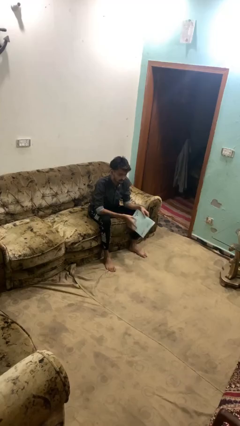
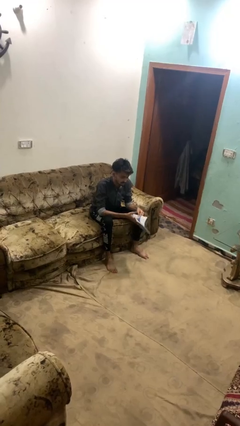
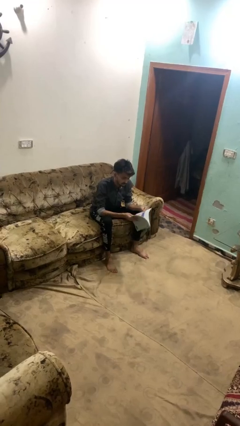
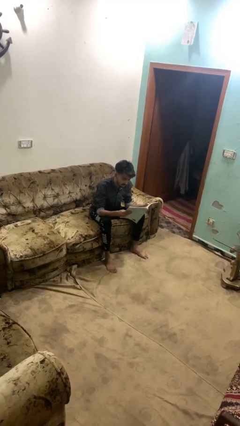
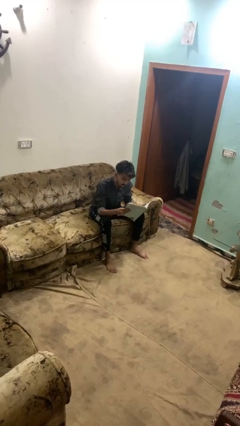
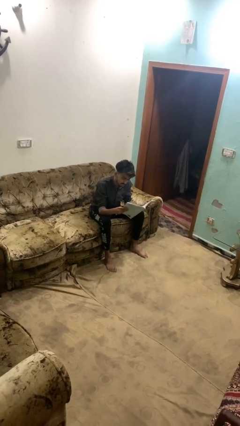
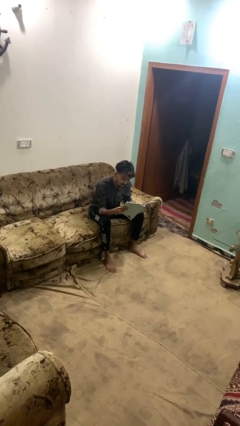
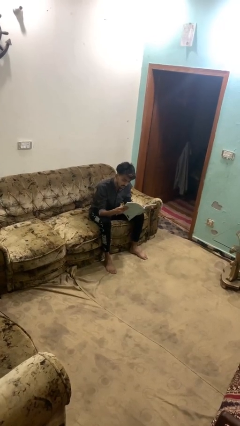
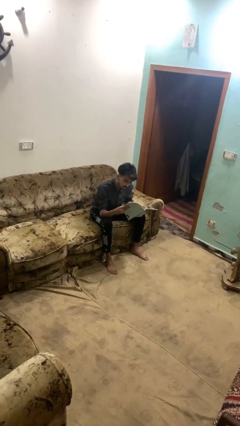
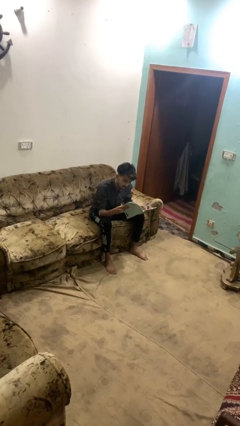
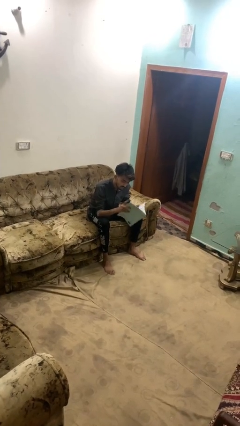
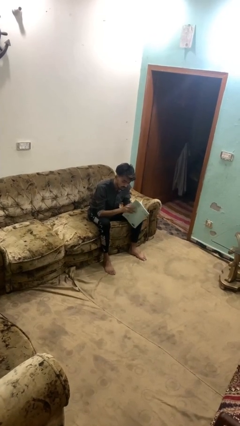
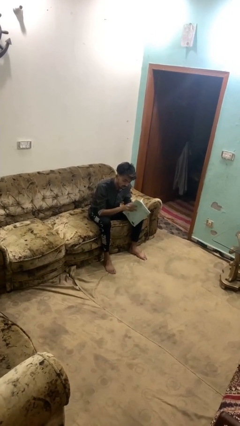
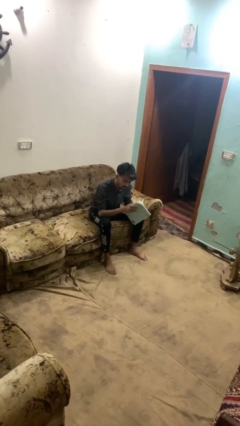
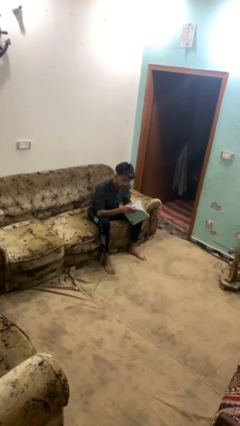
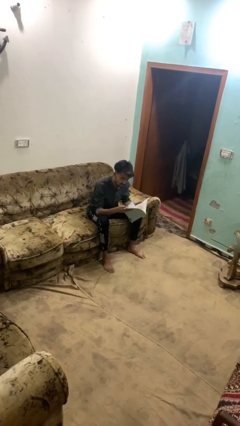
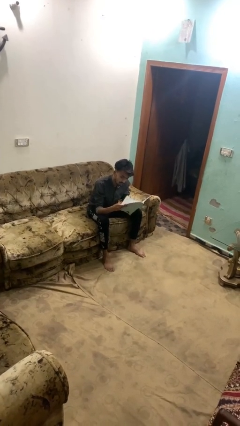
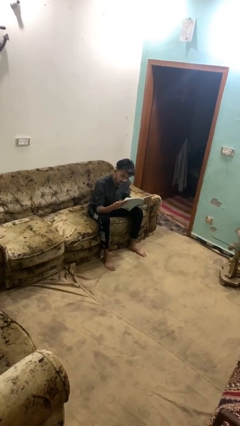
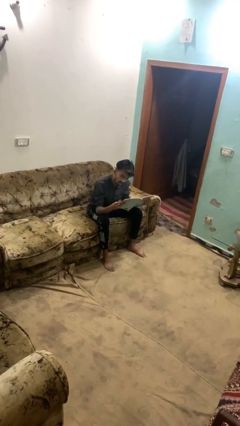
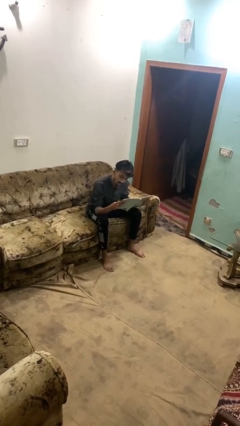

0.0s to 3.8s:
person reads magazine

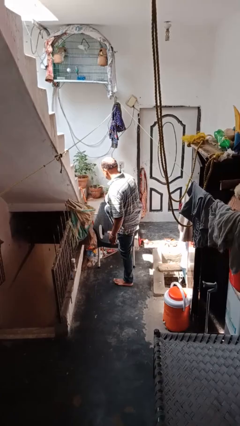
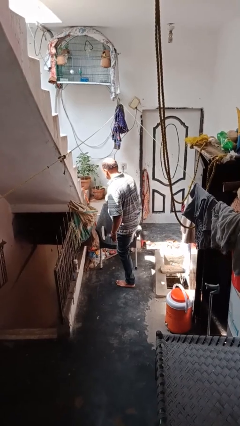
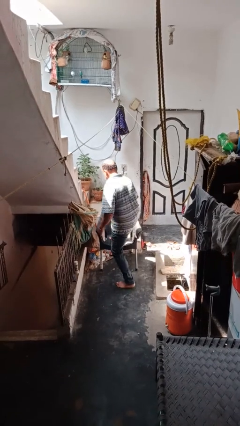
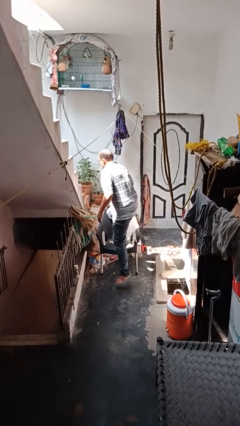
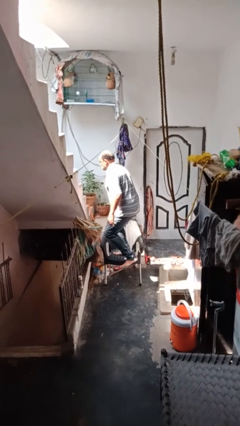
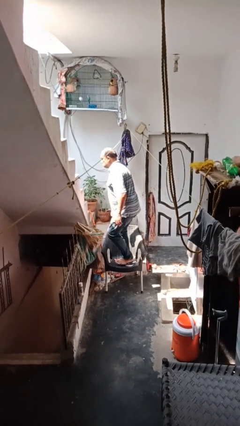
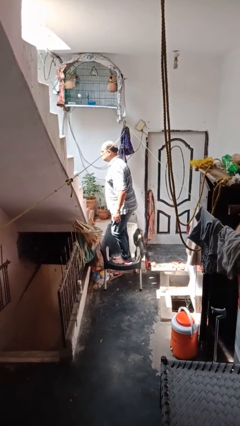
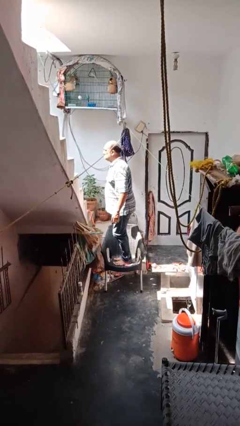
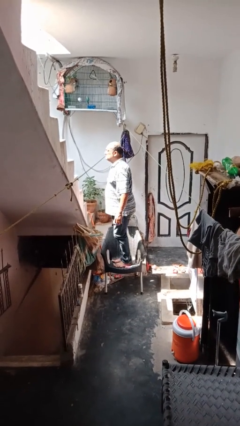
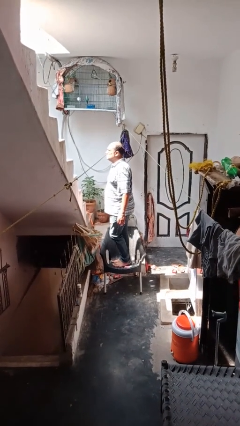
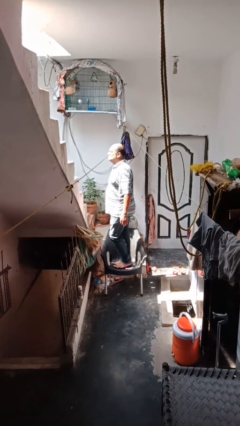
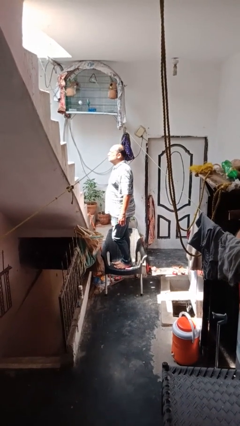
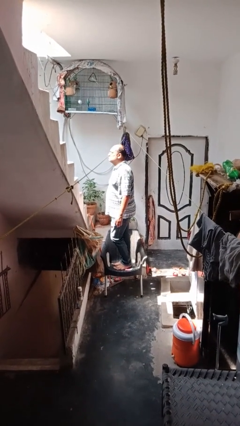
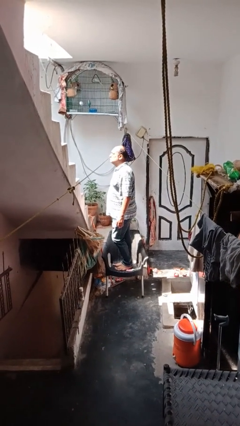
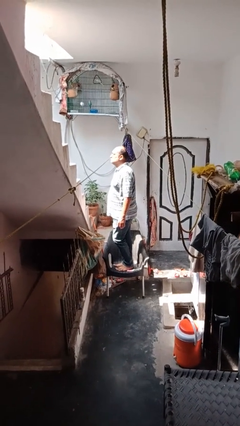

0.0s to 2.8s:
person climbs on chair

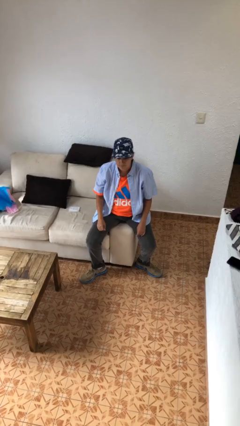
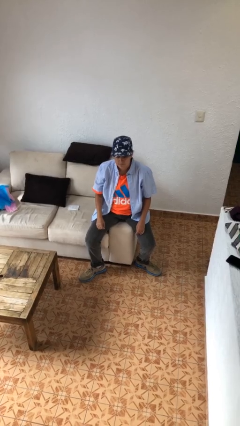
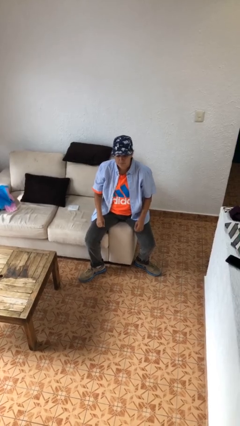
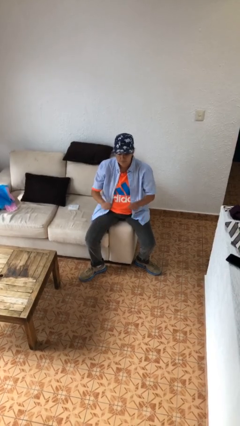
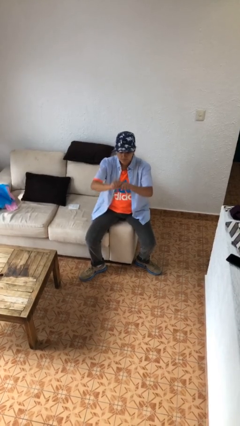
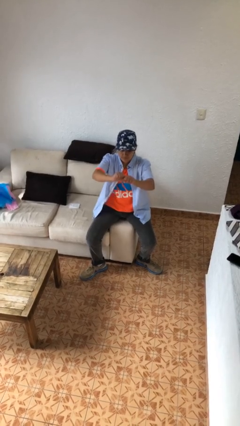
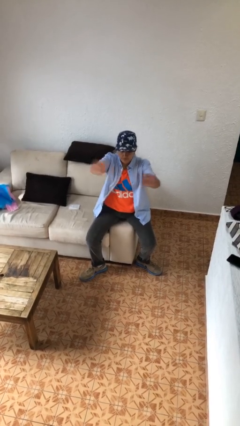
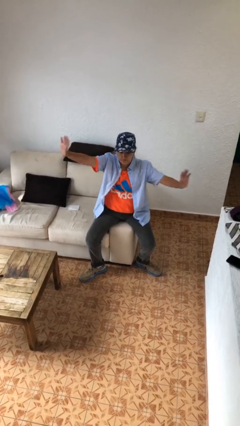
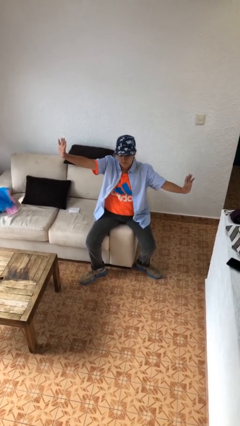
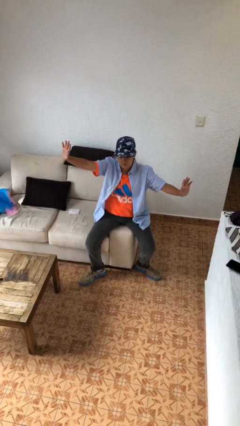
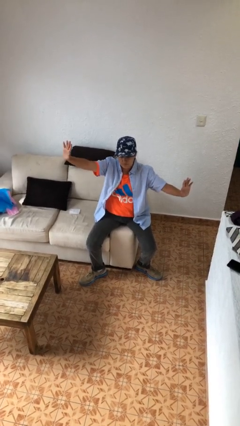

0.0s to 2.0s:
person gestures zoom in

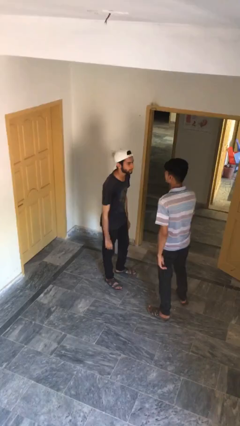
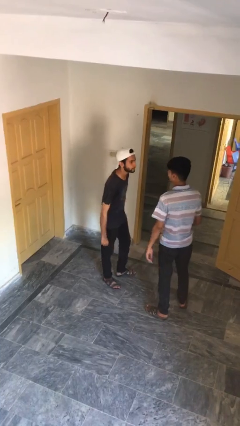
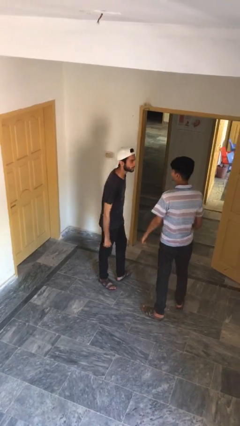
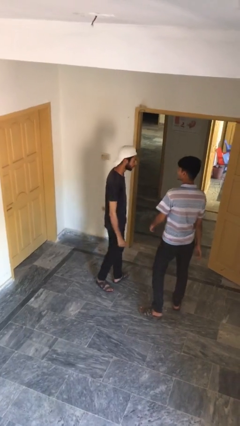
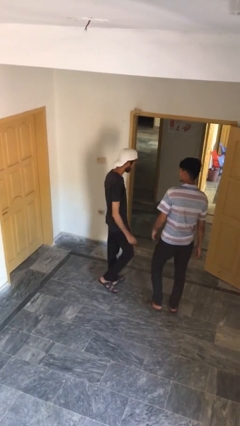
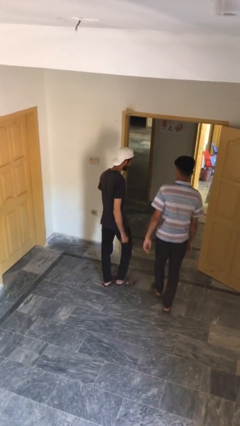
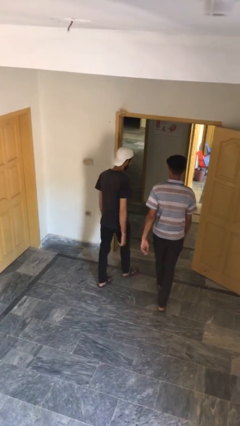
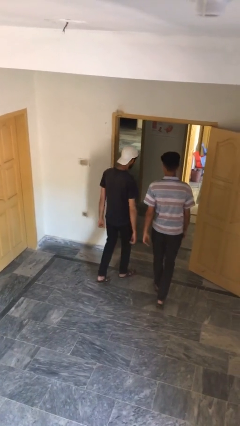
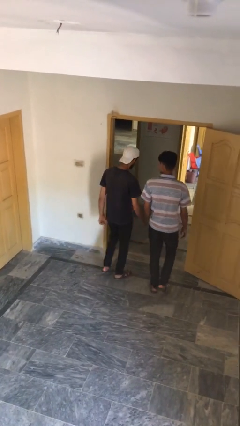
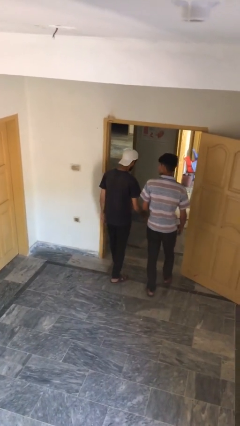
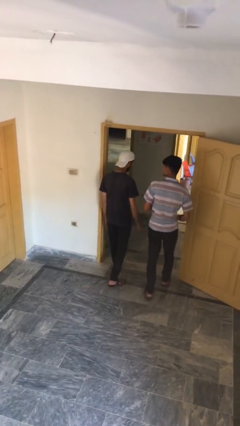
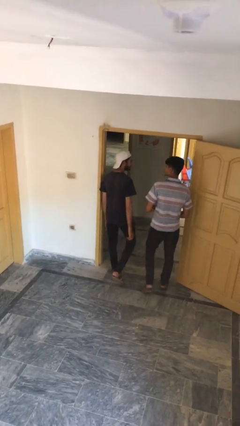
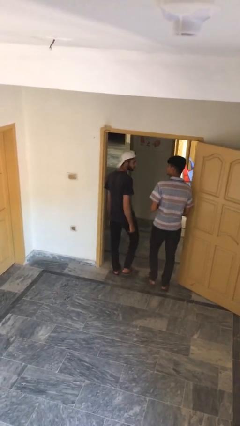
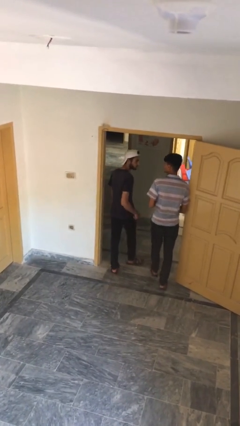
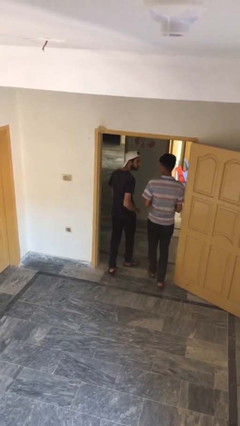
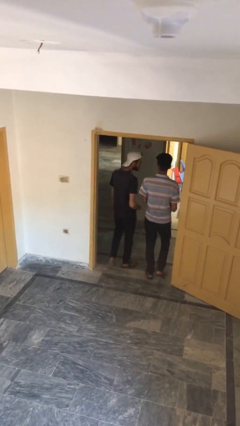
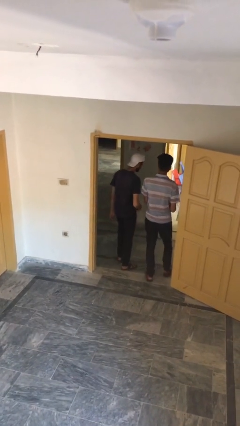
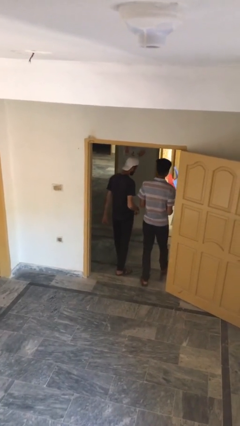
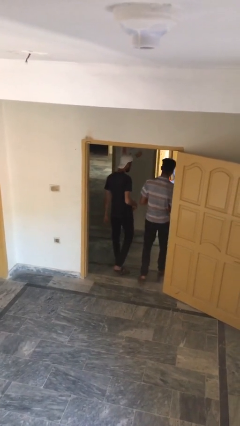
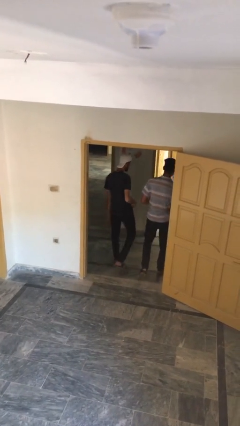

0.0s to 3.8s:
person talks to person

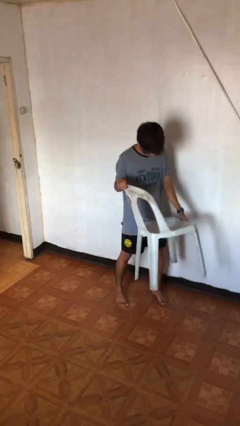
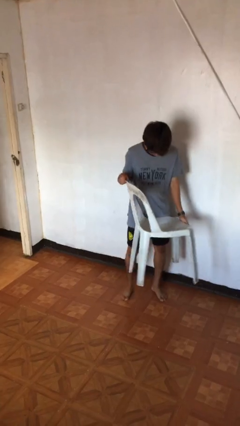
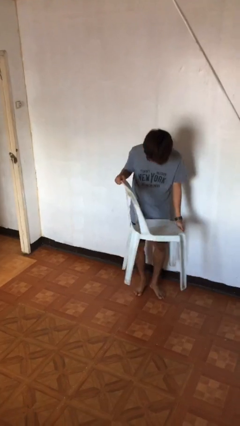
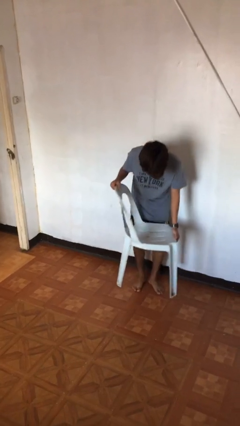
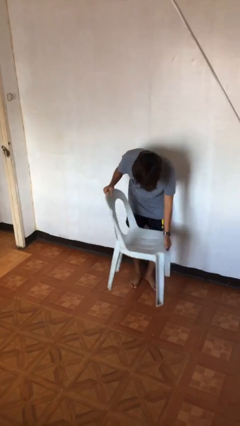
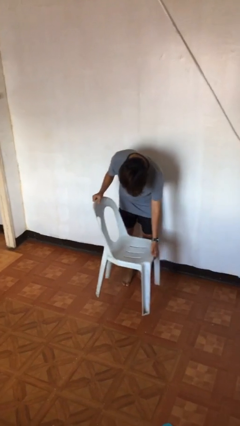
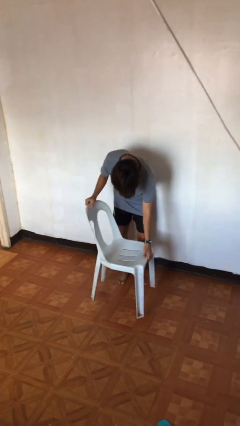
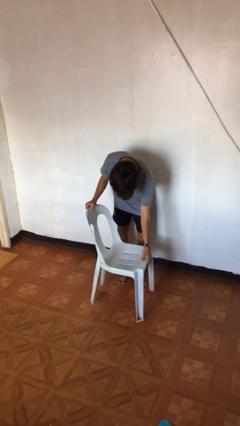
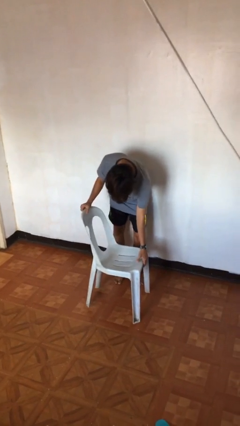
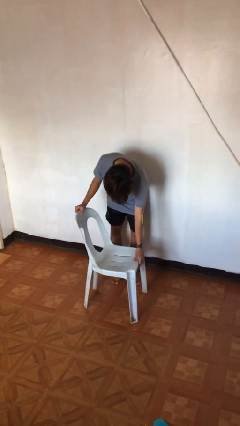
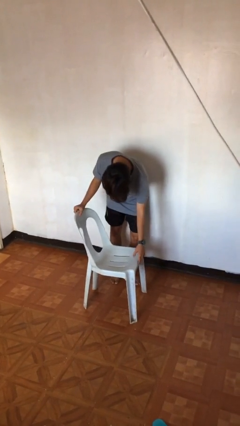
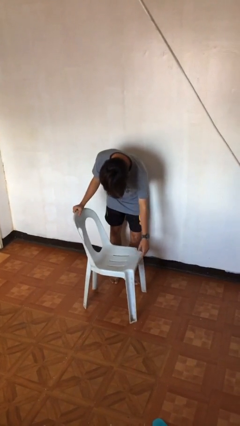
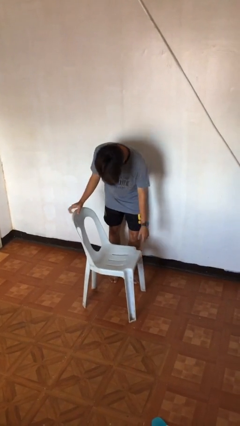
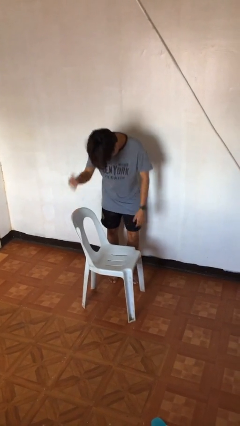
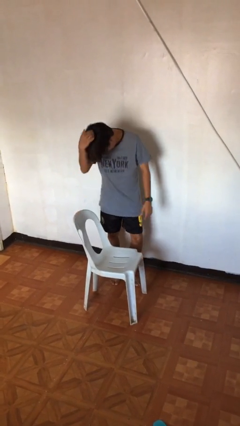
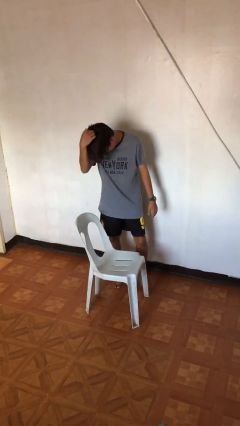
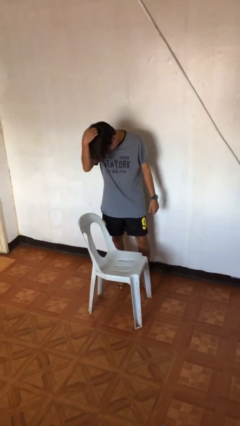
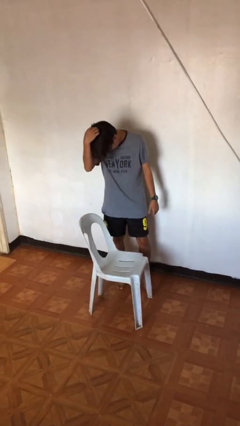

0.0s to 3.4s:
person puts down object on floor

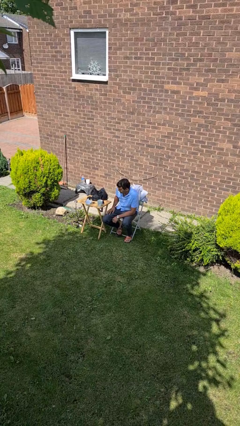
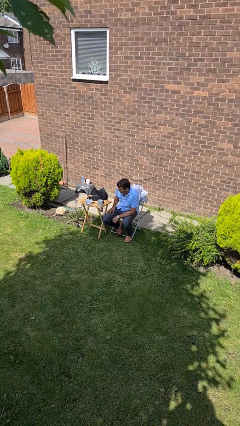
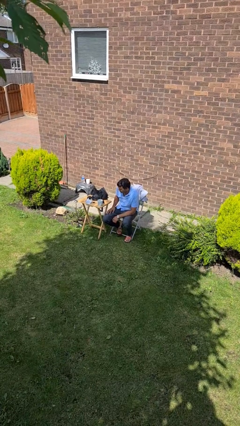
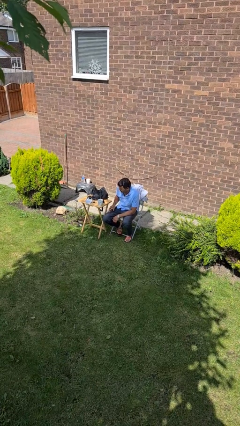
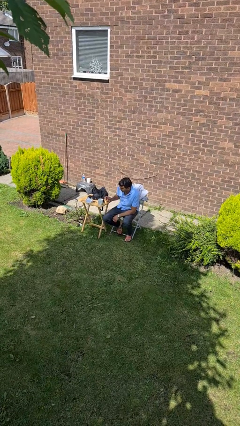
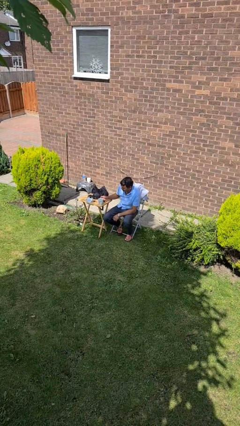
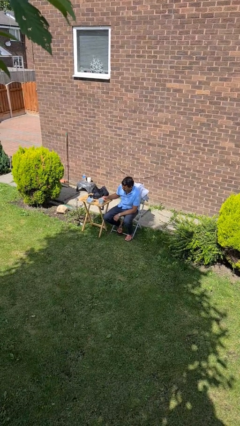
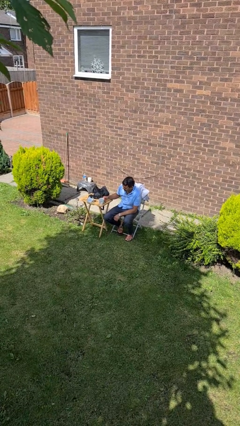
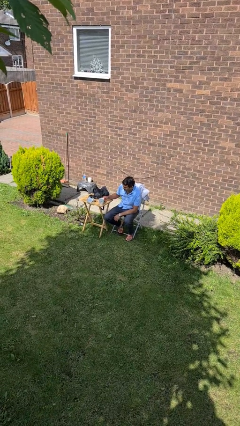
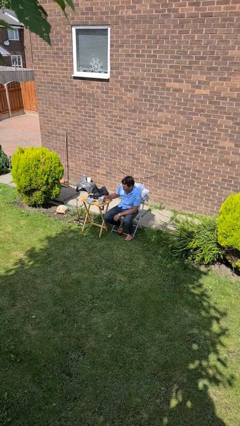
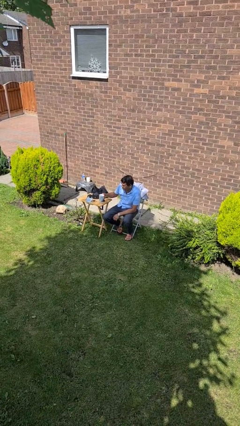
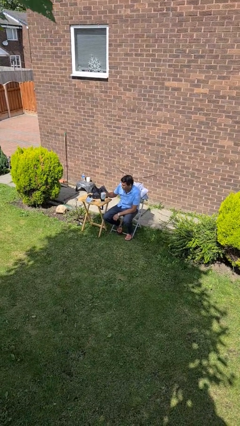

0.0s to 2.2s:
person picks up object from table
